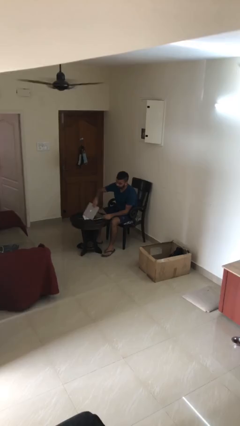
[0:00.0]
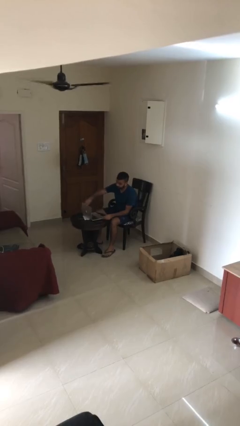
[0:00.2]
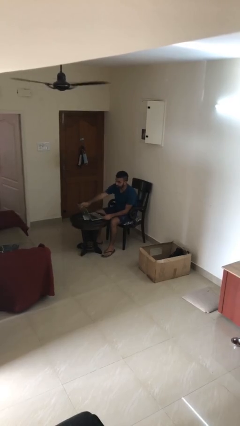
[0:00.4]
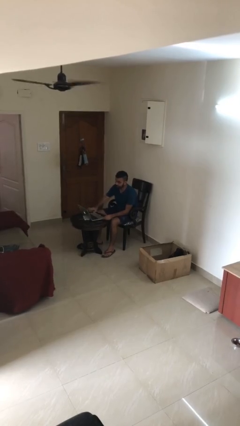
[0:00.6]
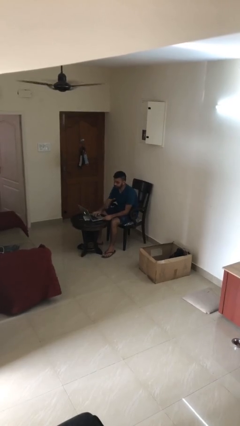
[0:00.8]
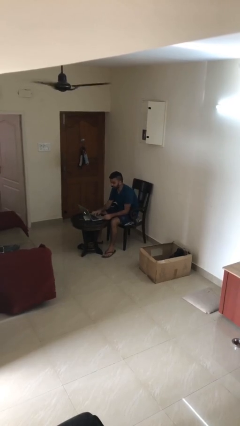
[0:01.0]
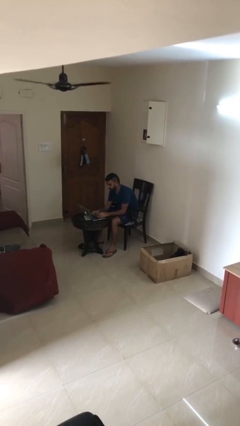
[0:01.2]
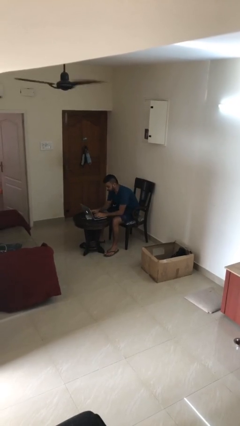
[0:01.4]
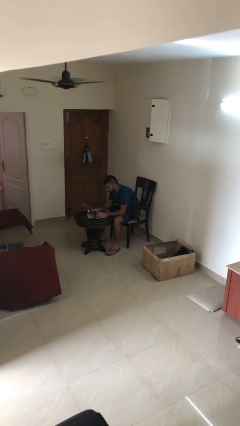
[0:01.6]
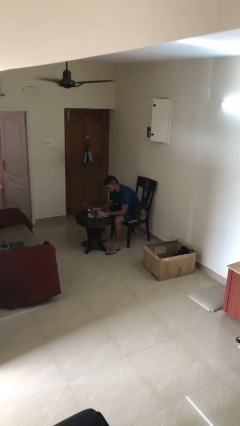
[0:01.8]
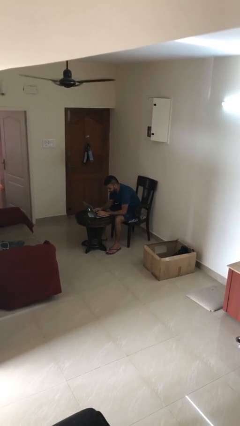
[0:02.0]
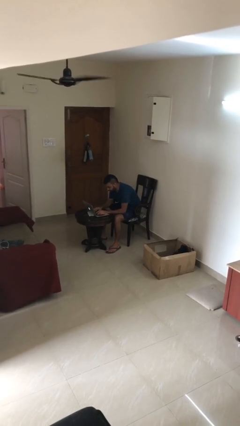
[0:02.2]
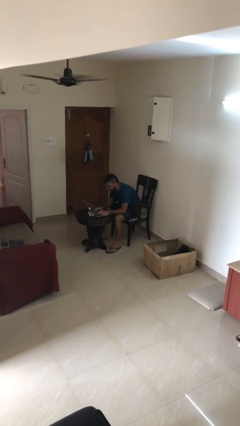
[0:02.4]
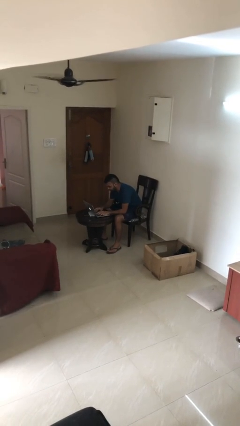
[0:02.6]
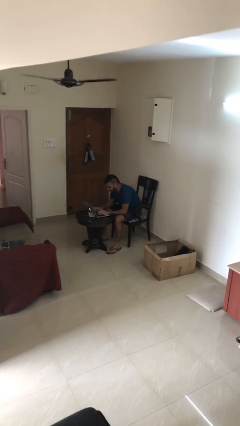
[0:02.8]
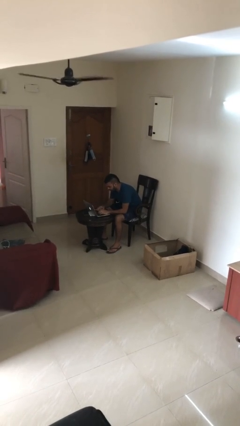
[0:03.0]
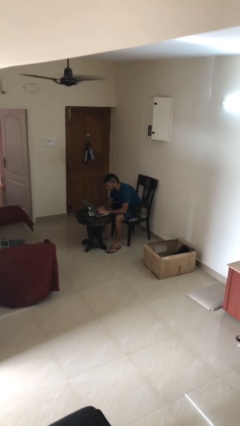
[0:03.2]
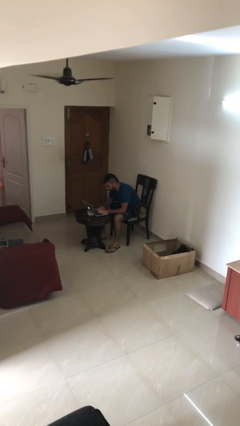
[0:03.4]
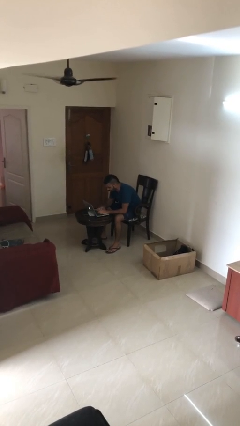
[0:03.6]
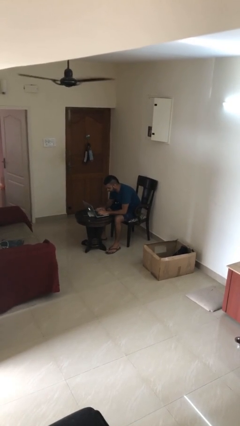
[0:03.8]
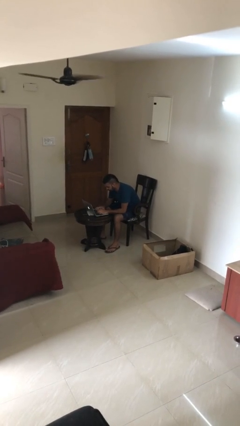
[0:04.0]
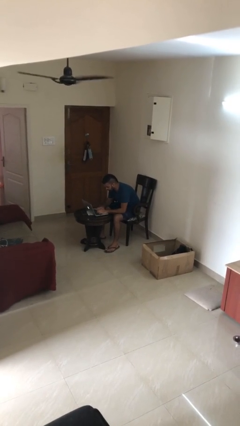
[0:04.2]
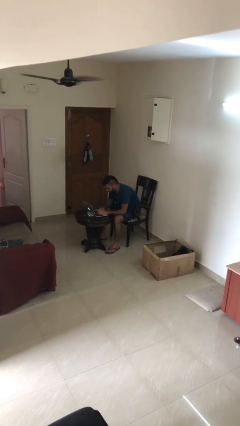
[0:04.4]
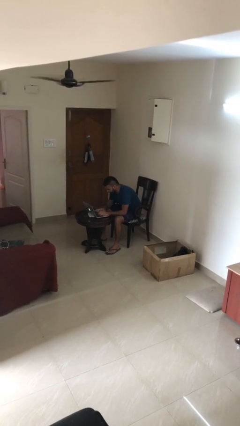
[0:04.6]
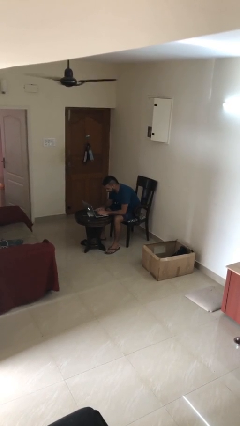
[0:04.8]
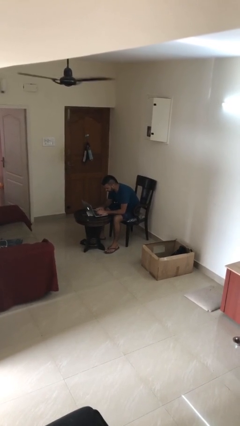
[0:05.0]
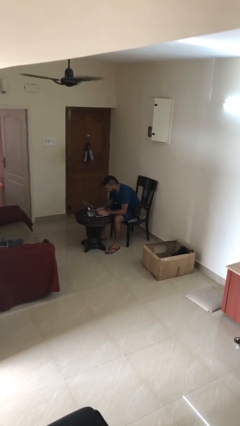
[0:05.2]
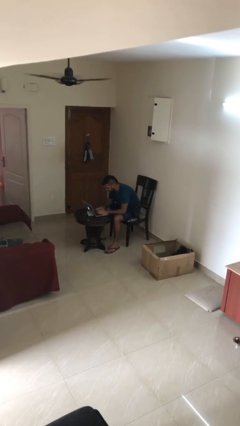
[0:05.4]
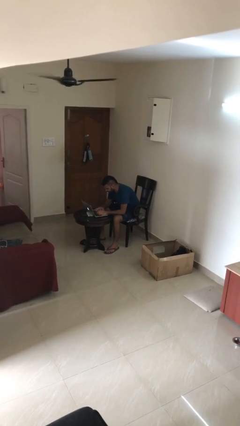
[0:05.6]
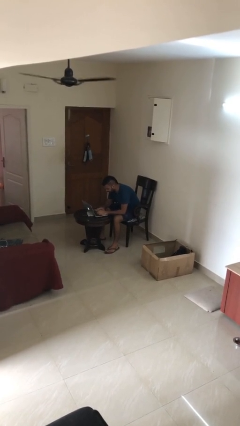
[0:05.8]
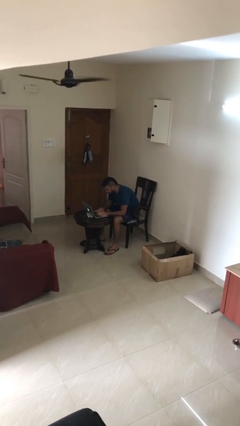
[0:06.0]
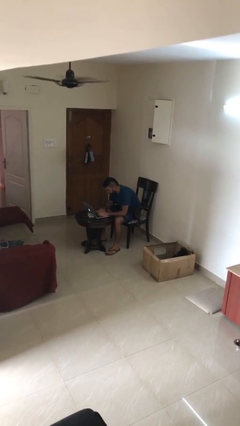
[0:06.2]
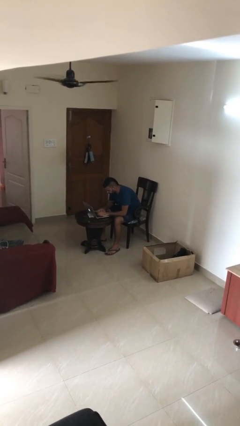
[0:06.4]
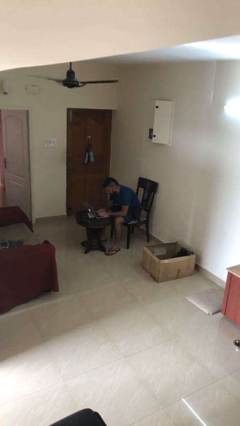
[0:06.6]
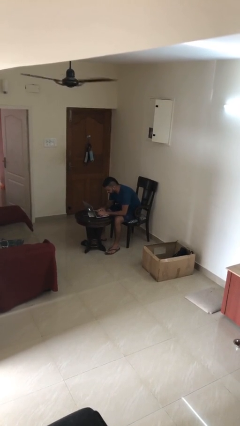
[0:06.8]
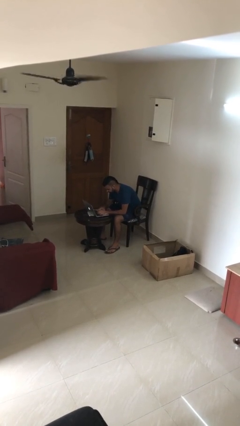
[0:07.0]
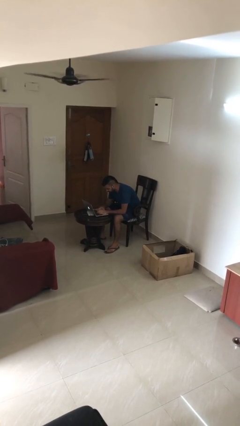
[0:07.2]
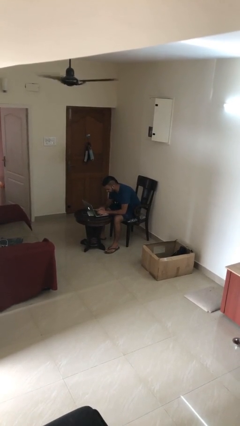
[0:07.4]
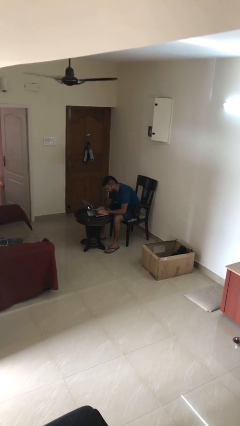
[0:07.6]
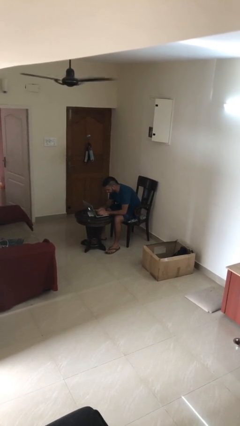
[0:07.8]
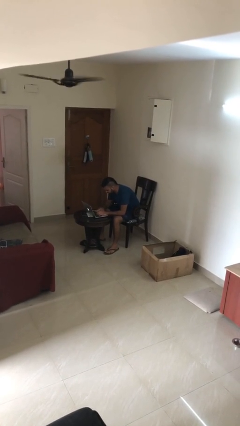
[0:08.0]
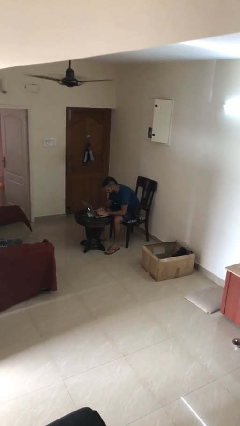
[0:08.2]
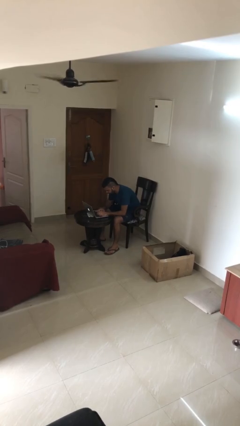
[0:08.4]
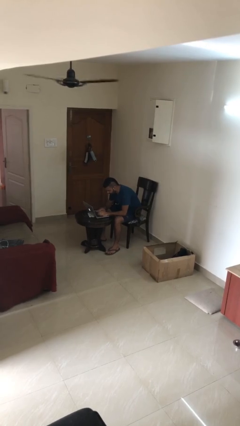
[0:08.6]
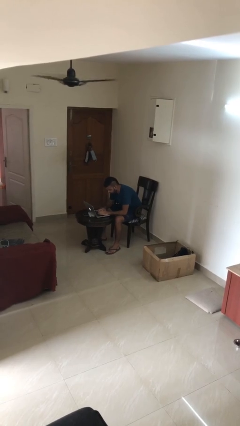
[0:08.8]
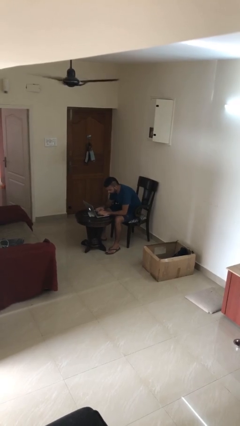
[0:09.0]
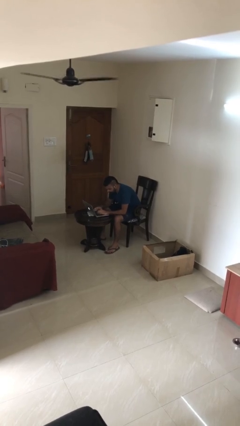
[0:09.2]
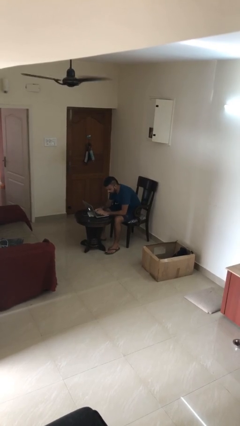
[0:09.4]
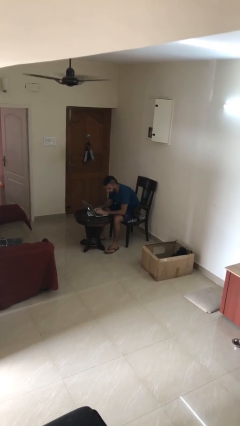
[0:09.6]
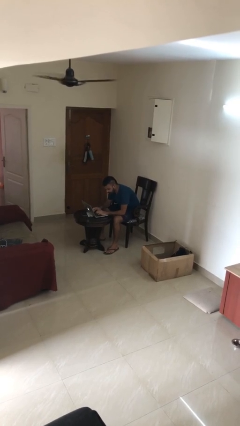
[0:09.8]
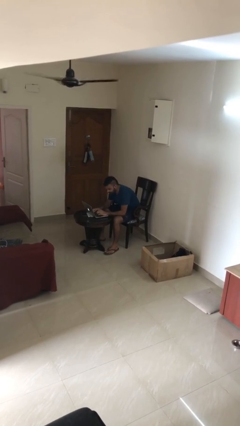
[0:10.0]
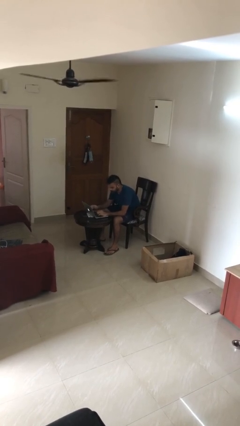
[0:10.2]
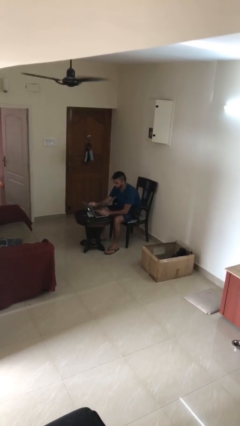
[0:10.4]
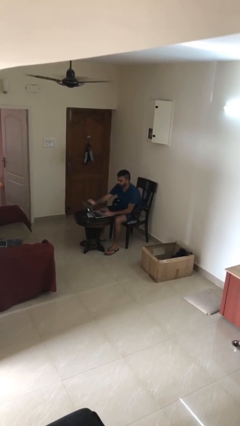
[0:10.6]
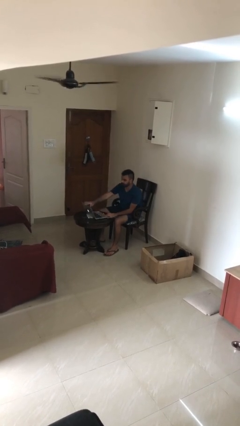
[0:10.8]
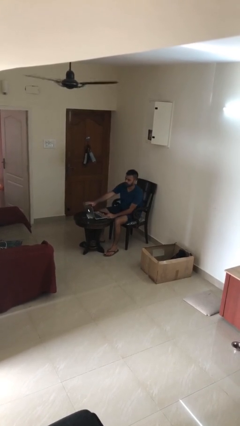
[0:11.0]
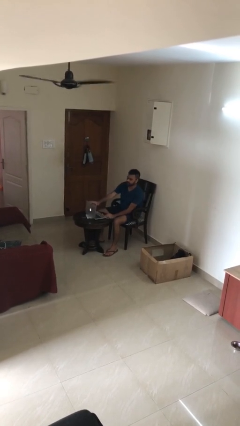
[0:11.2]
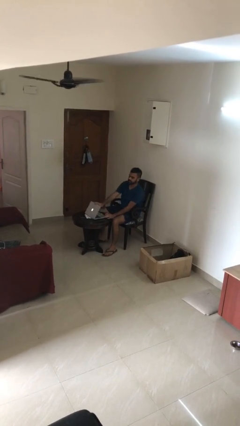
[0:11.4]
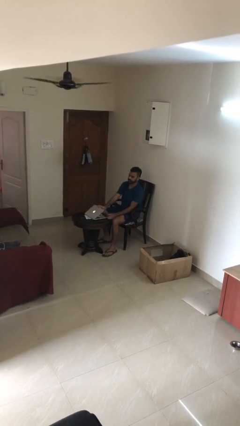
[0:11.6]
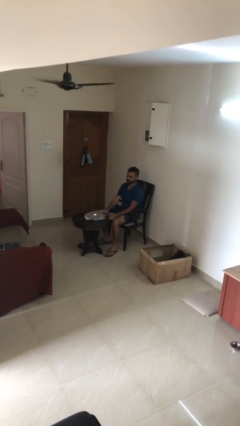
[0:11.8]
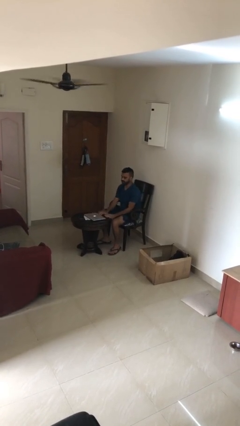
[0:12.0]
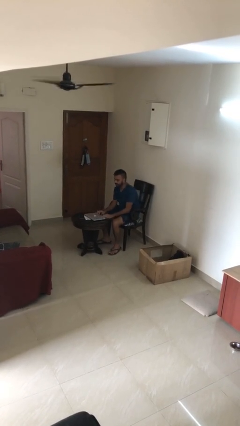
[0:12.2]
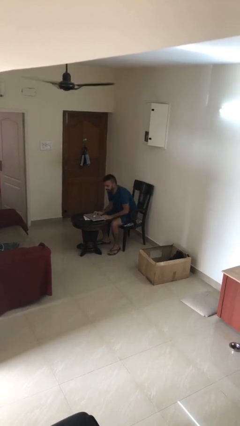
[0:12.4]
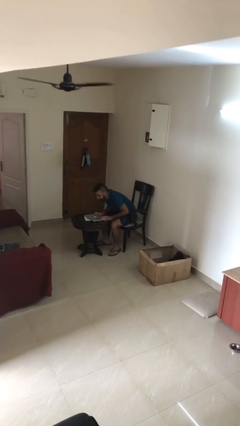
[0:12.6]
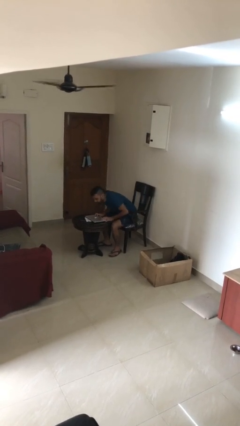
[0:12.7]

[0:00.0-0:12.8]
person interacts with laptop

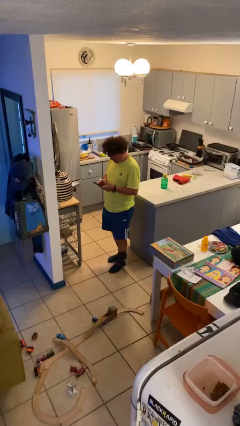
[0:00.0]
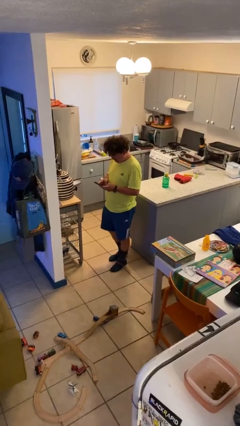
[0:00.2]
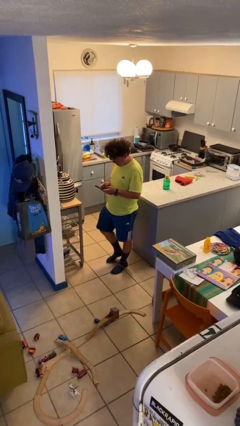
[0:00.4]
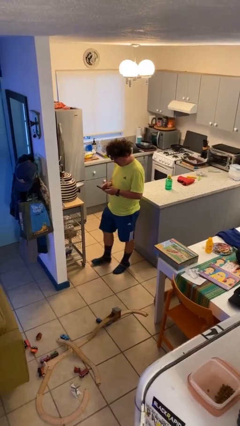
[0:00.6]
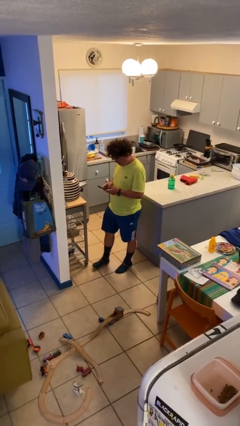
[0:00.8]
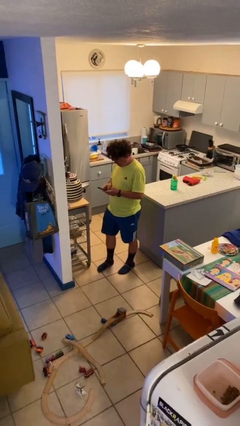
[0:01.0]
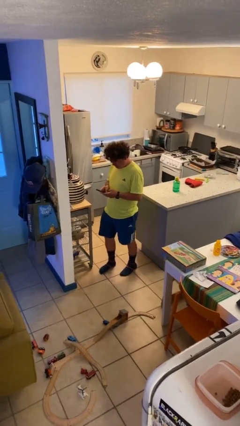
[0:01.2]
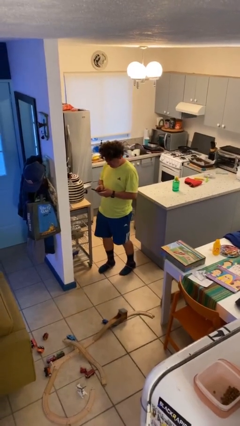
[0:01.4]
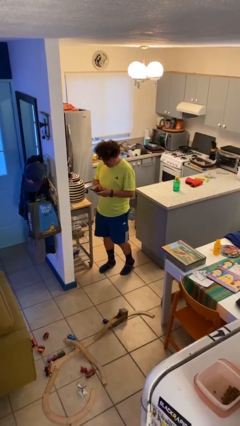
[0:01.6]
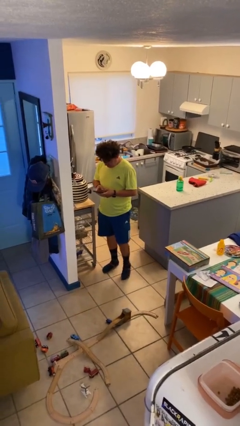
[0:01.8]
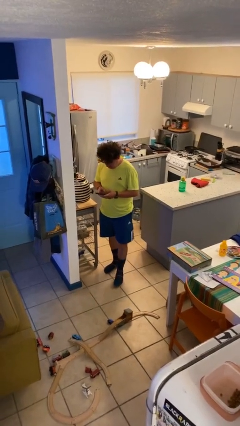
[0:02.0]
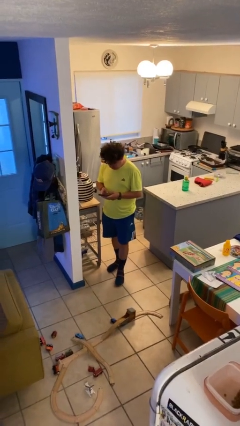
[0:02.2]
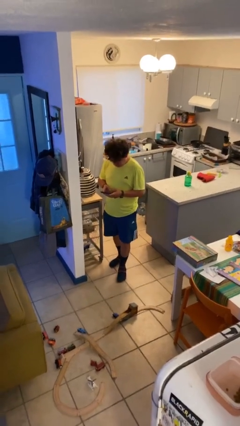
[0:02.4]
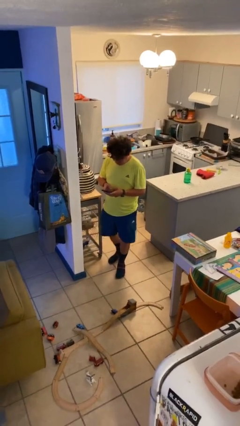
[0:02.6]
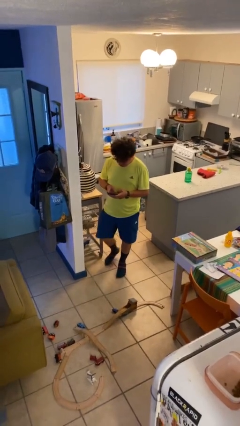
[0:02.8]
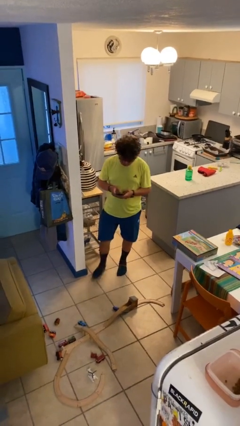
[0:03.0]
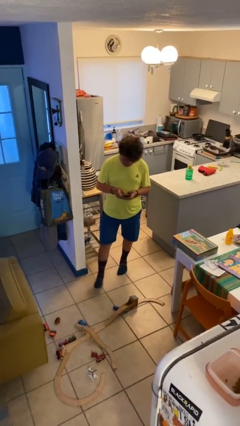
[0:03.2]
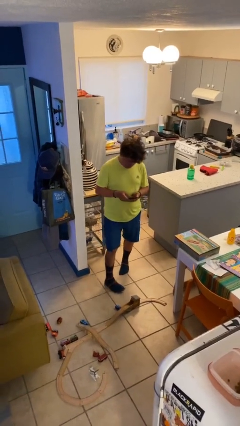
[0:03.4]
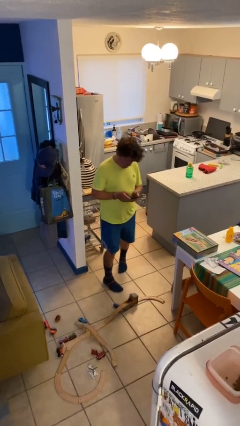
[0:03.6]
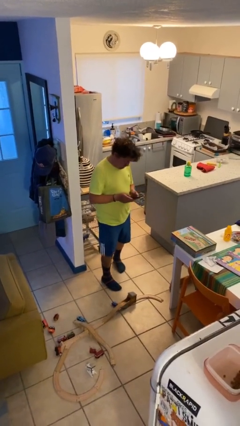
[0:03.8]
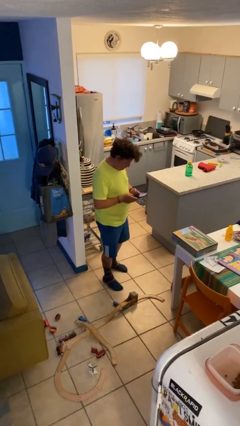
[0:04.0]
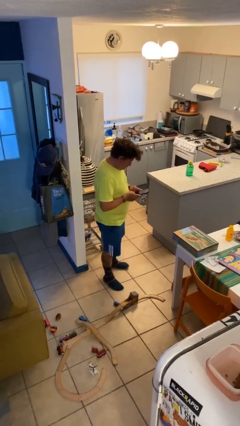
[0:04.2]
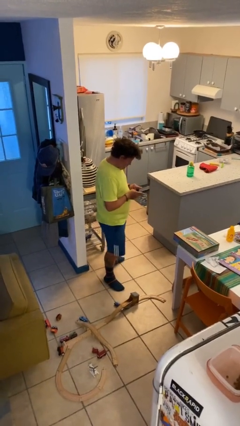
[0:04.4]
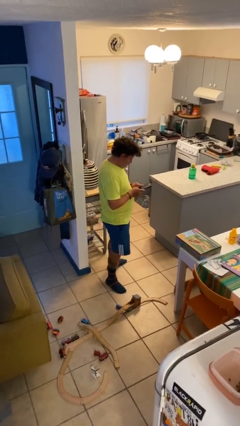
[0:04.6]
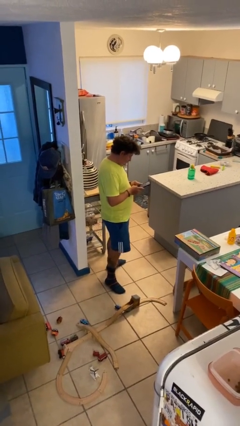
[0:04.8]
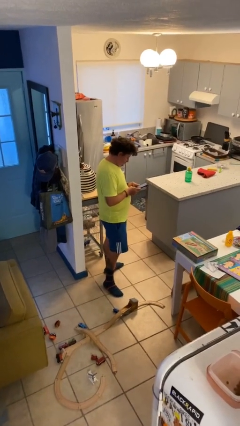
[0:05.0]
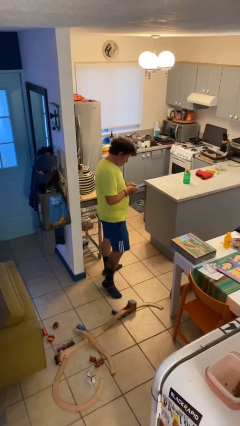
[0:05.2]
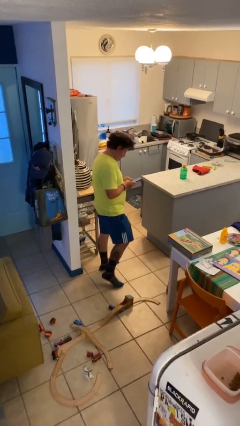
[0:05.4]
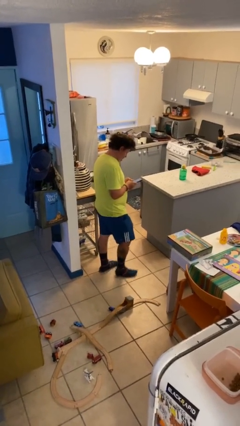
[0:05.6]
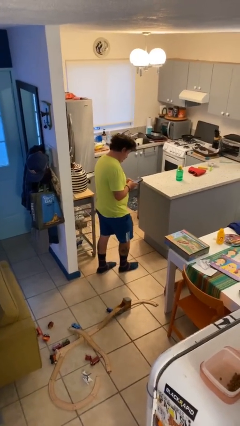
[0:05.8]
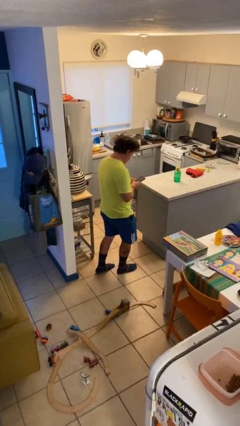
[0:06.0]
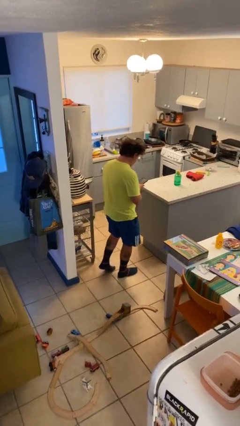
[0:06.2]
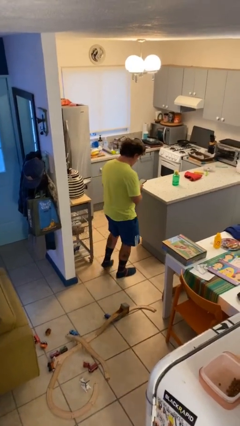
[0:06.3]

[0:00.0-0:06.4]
person texts on phone
